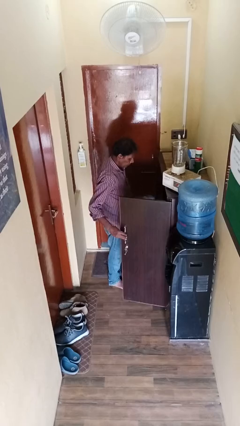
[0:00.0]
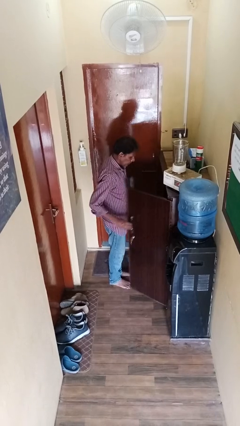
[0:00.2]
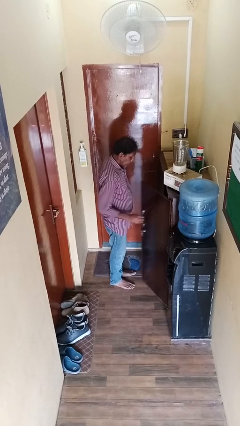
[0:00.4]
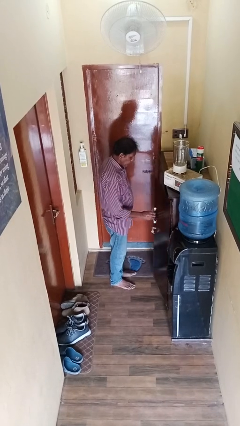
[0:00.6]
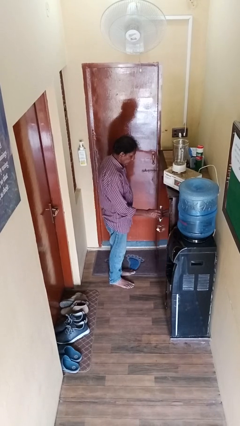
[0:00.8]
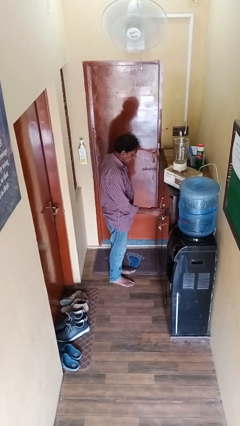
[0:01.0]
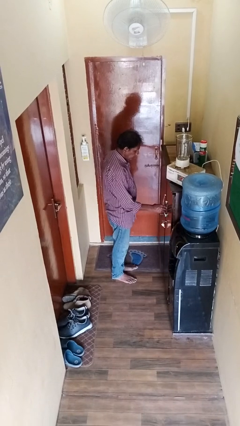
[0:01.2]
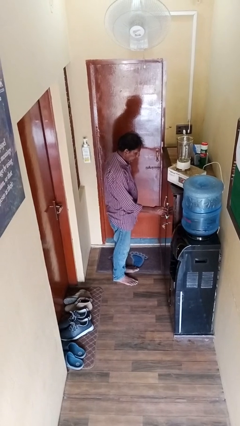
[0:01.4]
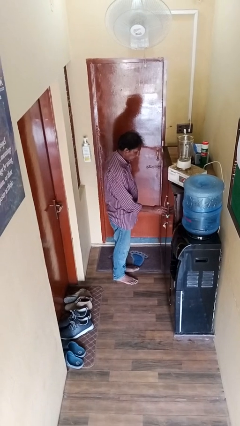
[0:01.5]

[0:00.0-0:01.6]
person closes cabinet

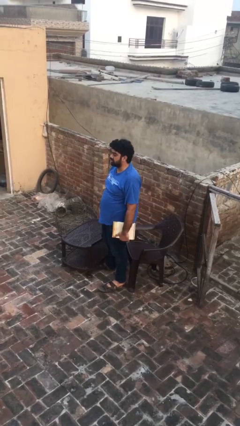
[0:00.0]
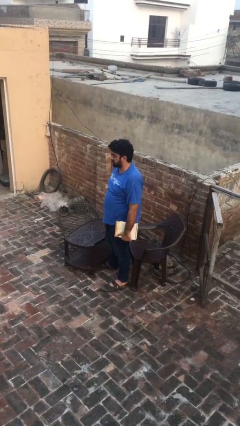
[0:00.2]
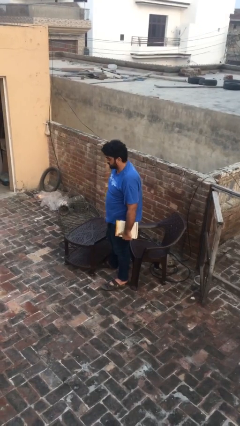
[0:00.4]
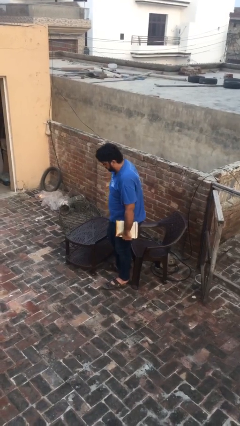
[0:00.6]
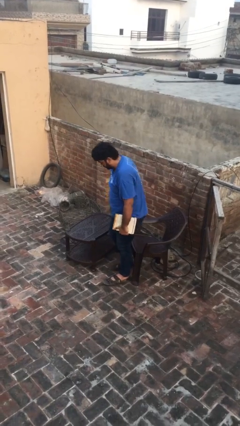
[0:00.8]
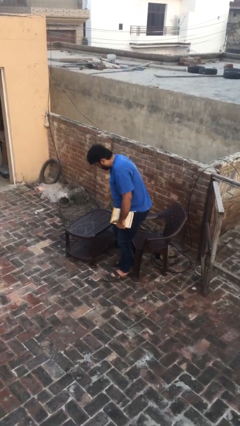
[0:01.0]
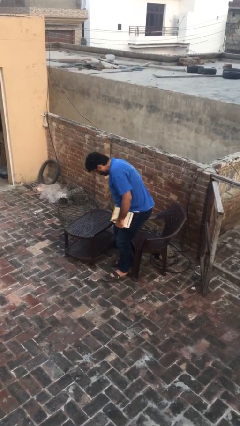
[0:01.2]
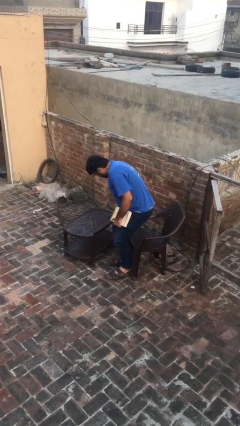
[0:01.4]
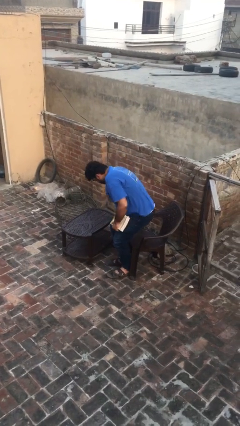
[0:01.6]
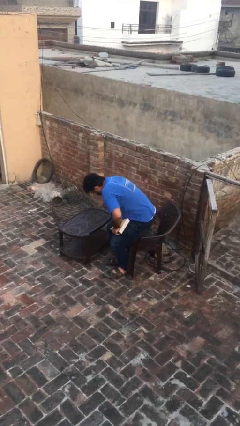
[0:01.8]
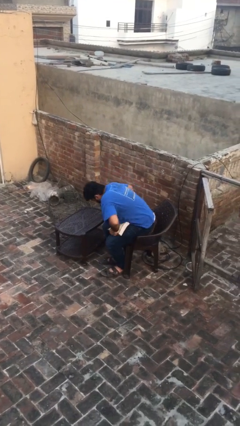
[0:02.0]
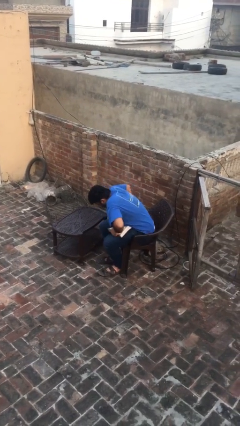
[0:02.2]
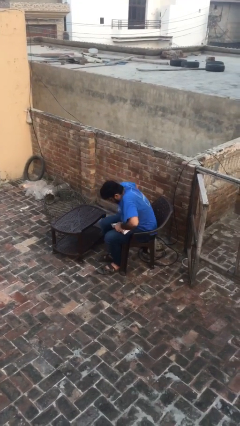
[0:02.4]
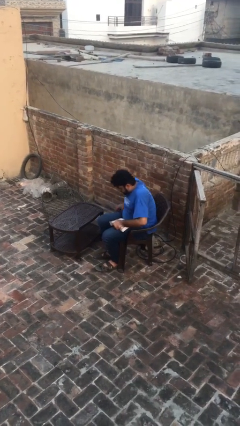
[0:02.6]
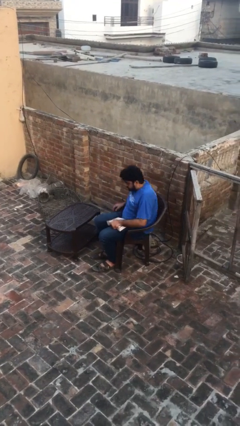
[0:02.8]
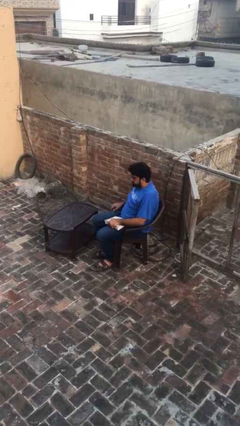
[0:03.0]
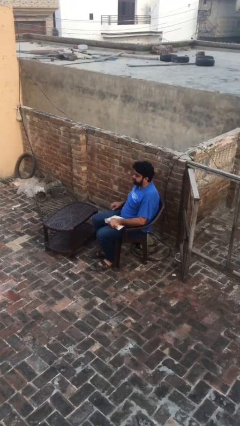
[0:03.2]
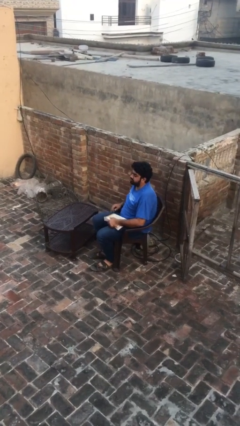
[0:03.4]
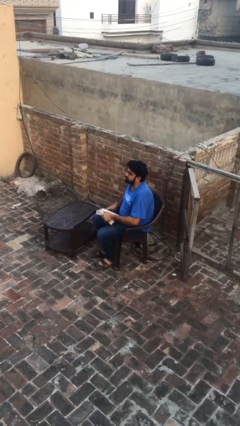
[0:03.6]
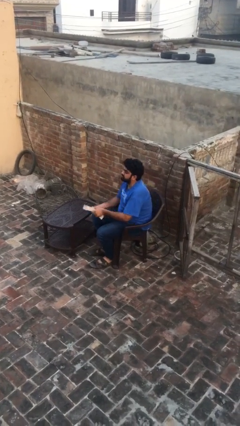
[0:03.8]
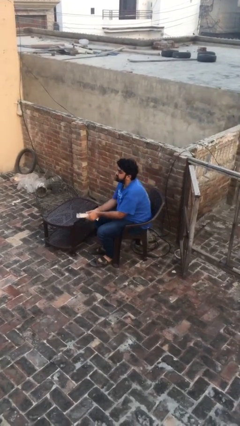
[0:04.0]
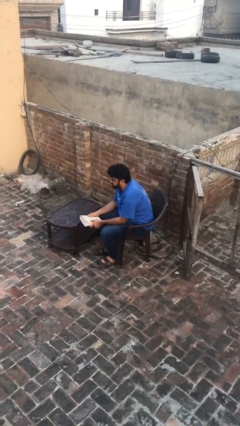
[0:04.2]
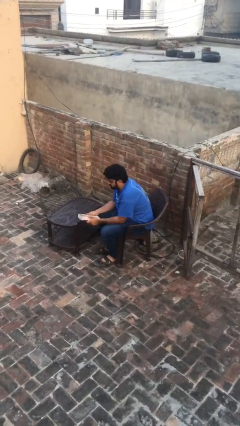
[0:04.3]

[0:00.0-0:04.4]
person sits down

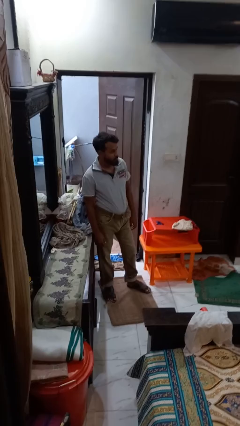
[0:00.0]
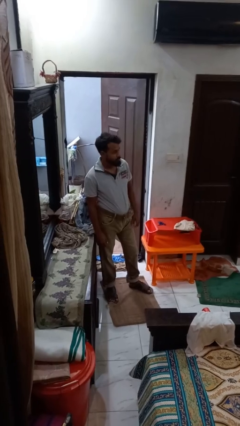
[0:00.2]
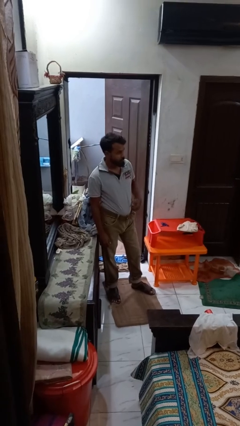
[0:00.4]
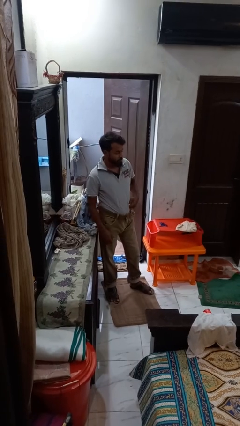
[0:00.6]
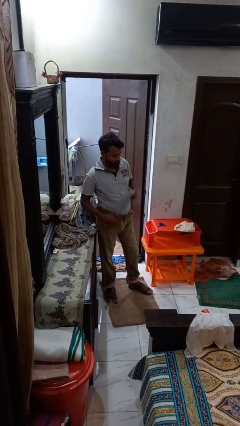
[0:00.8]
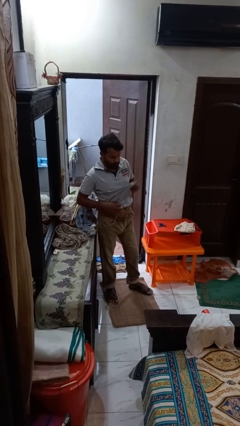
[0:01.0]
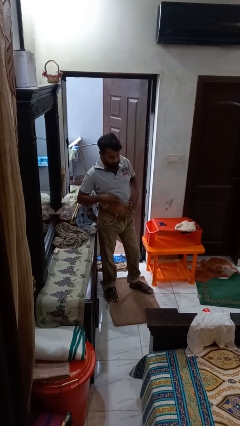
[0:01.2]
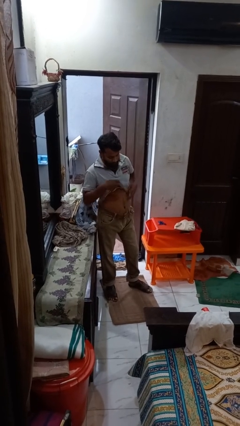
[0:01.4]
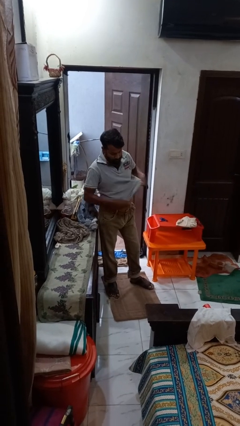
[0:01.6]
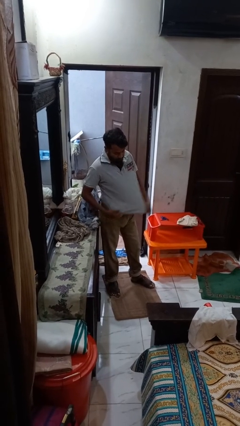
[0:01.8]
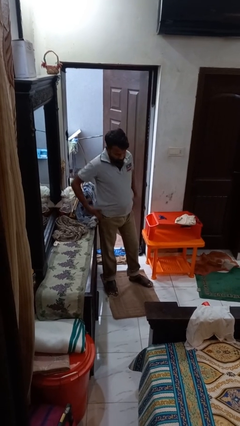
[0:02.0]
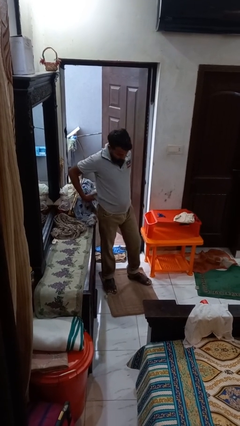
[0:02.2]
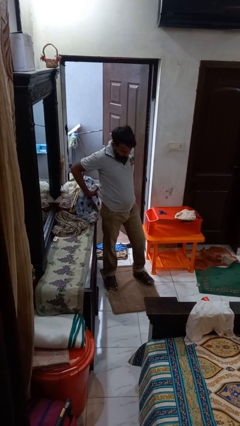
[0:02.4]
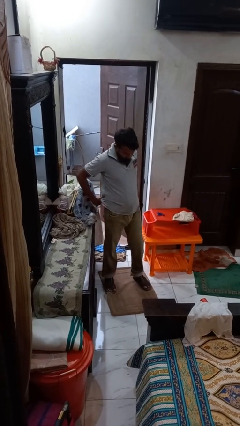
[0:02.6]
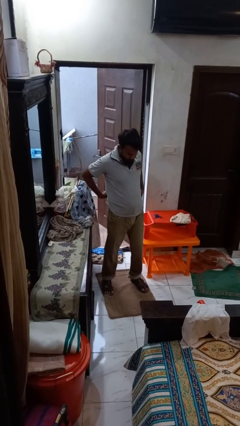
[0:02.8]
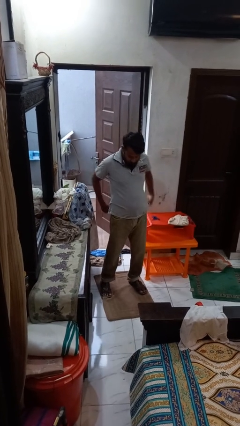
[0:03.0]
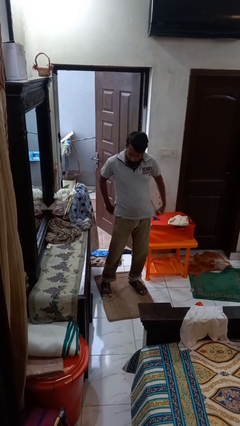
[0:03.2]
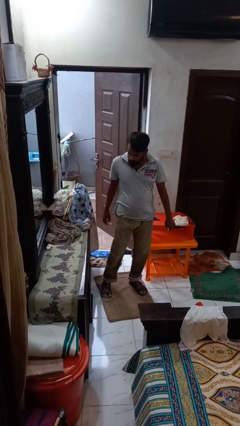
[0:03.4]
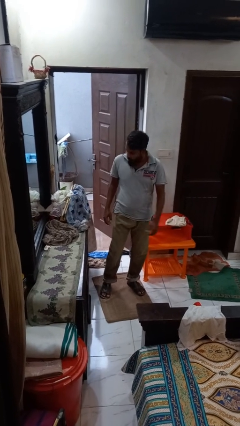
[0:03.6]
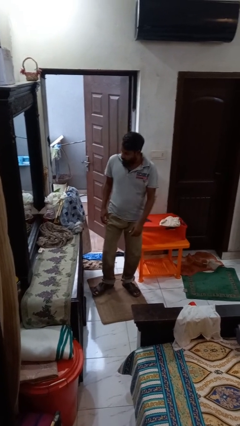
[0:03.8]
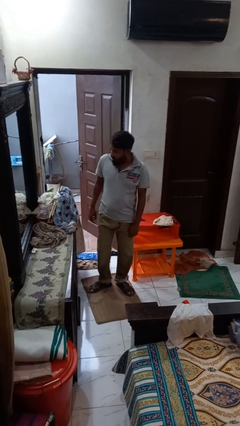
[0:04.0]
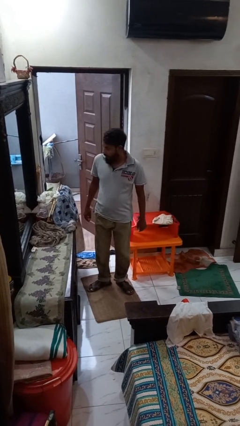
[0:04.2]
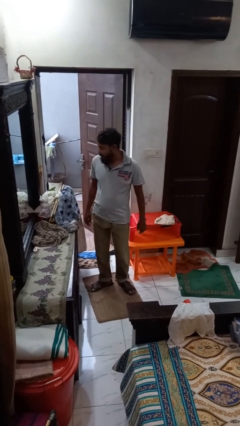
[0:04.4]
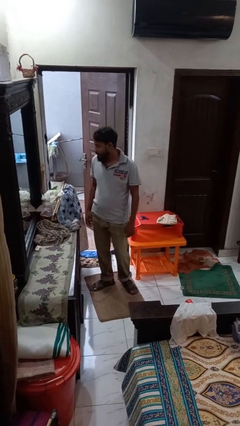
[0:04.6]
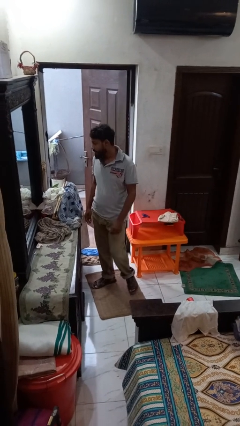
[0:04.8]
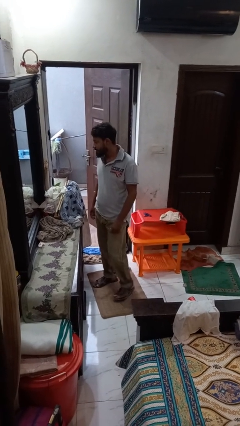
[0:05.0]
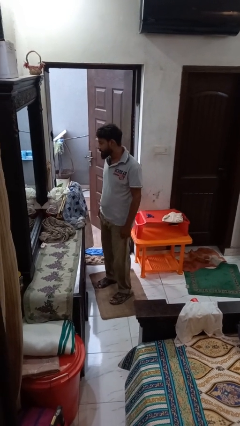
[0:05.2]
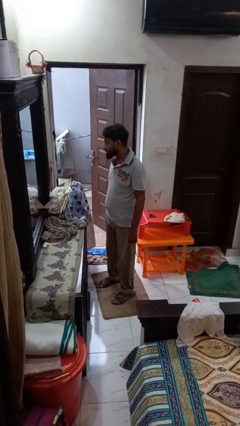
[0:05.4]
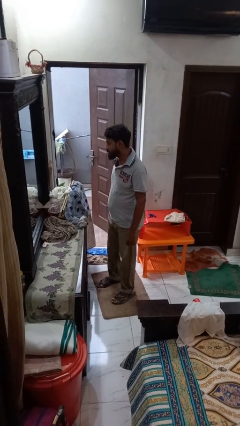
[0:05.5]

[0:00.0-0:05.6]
person untucks shirt

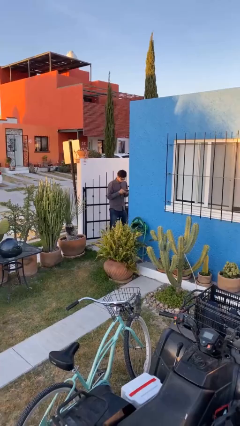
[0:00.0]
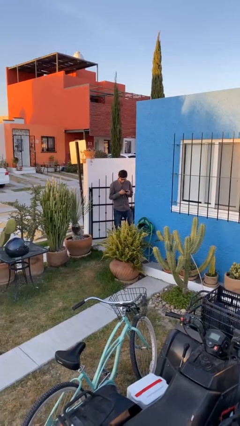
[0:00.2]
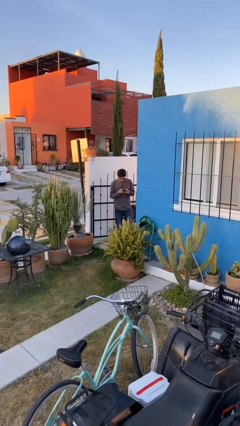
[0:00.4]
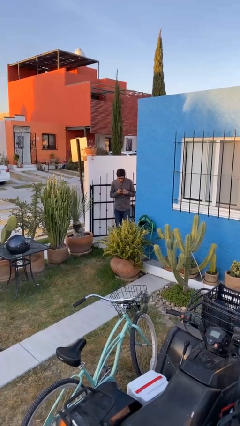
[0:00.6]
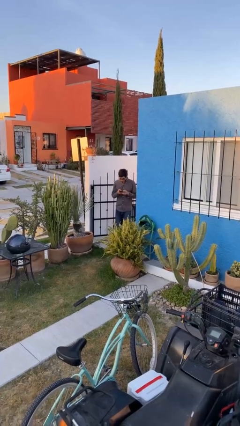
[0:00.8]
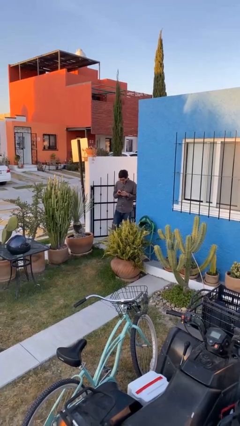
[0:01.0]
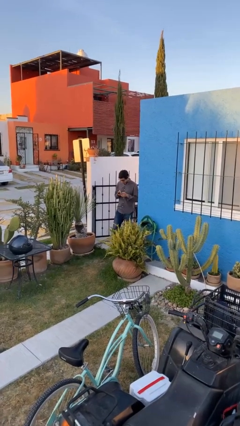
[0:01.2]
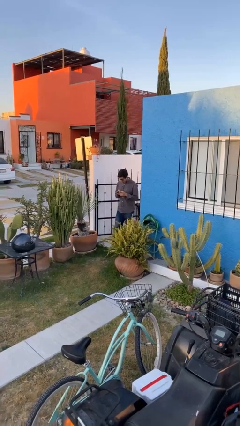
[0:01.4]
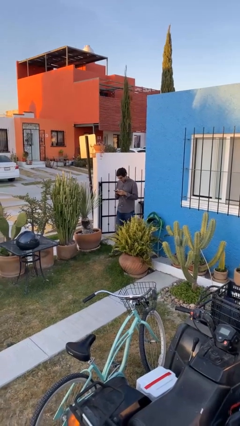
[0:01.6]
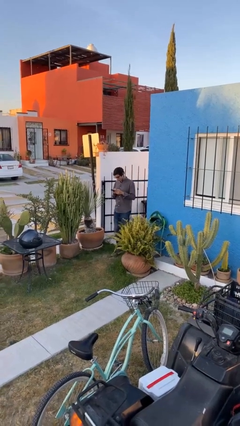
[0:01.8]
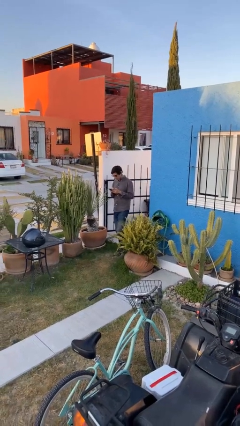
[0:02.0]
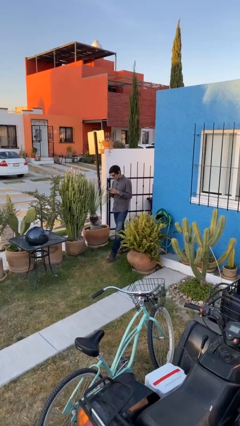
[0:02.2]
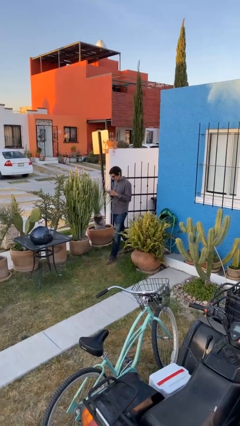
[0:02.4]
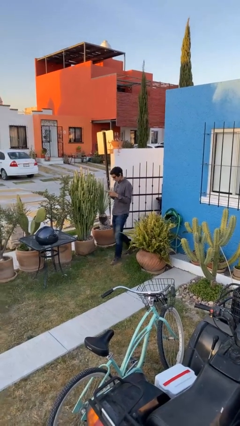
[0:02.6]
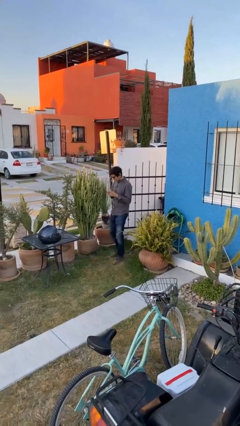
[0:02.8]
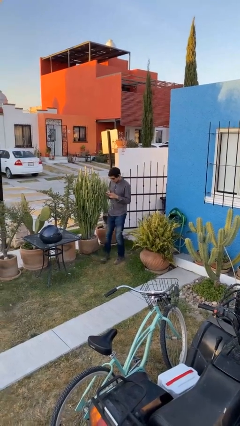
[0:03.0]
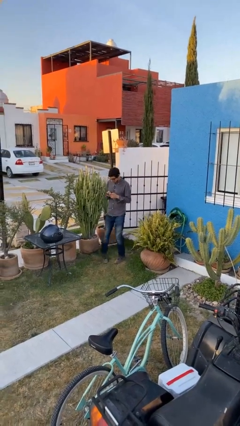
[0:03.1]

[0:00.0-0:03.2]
person enters scene through structure

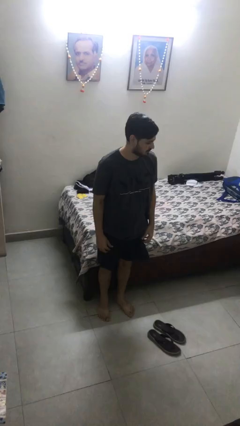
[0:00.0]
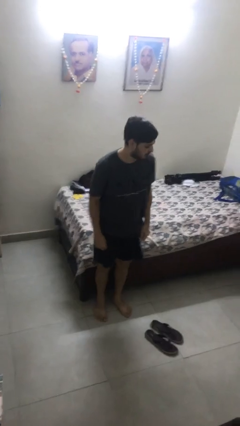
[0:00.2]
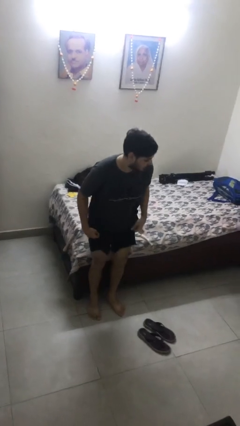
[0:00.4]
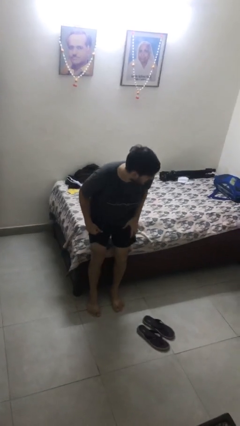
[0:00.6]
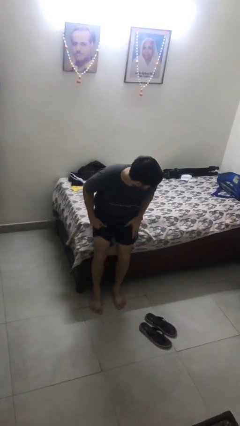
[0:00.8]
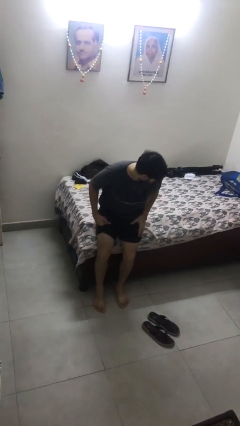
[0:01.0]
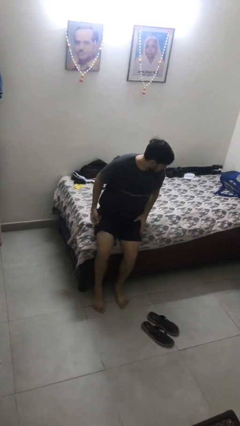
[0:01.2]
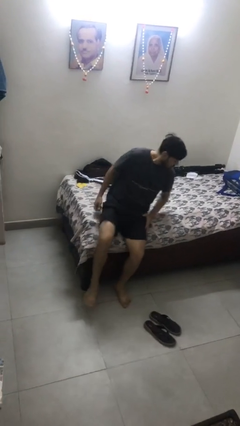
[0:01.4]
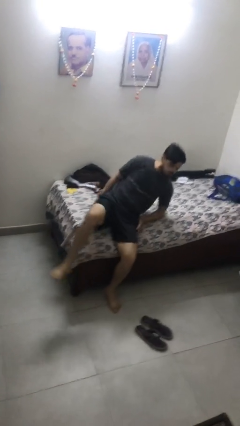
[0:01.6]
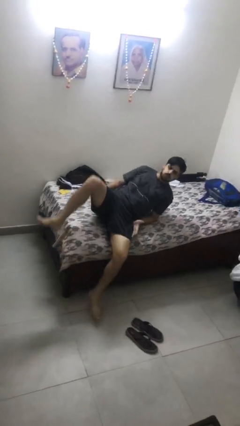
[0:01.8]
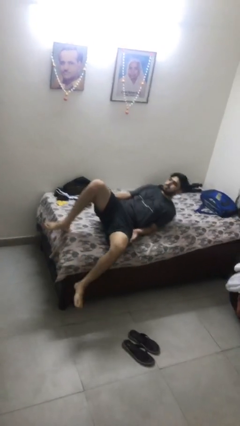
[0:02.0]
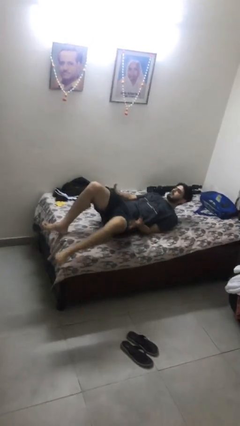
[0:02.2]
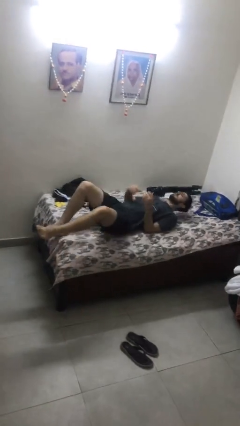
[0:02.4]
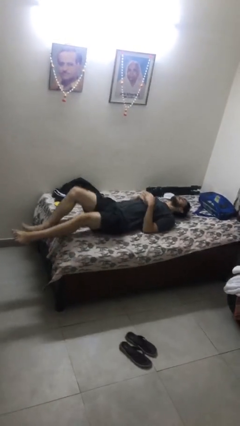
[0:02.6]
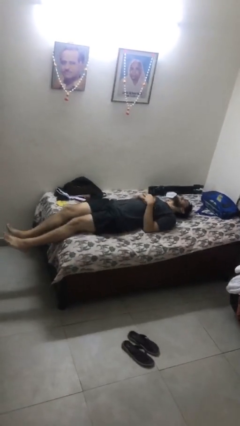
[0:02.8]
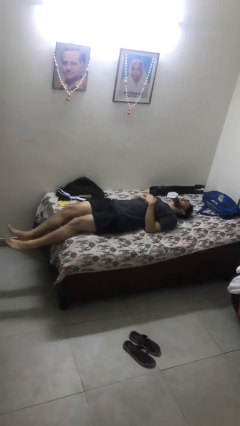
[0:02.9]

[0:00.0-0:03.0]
person lies down on bed

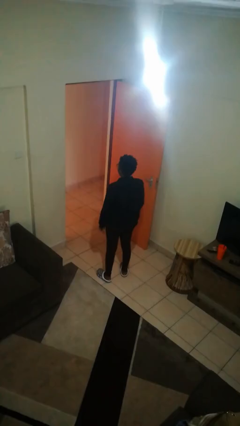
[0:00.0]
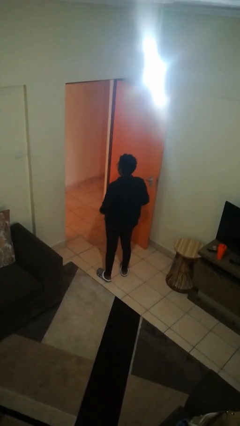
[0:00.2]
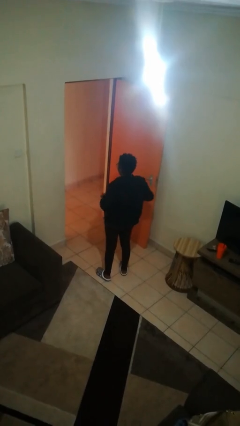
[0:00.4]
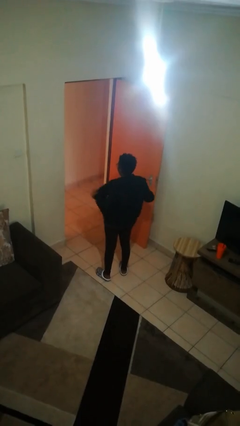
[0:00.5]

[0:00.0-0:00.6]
person unzips jacket
